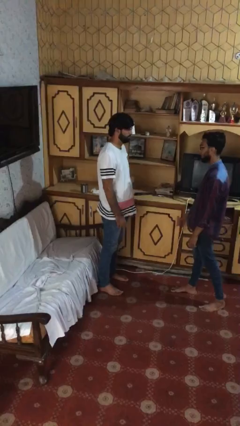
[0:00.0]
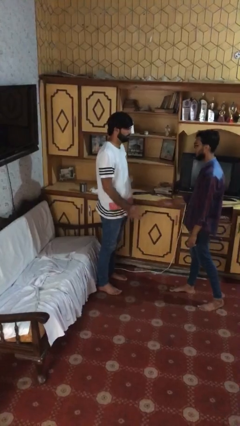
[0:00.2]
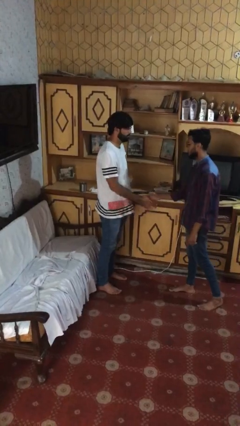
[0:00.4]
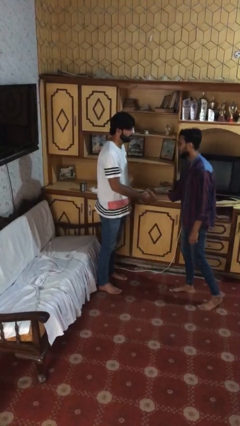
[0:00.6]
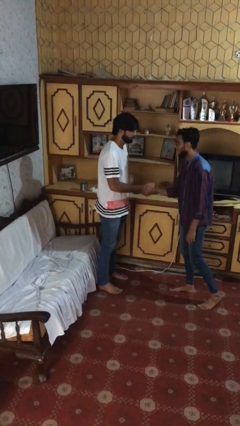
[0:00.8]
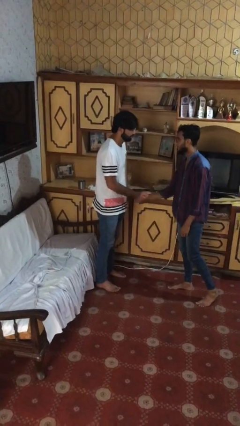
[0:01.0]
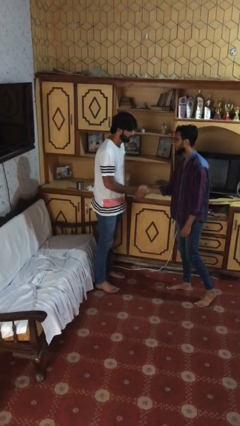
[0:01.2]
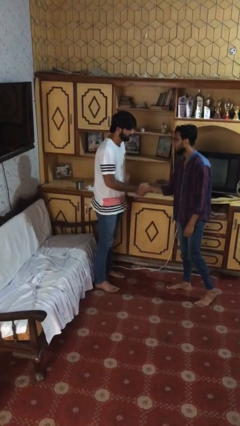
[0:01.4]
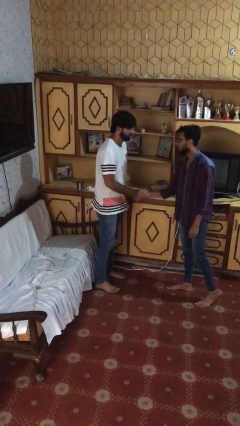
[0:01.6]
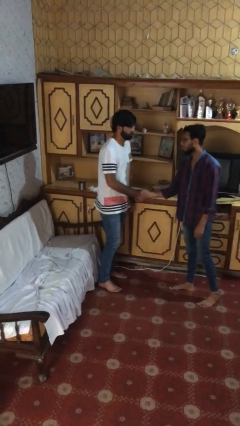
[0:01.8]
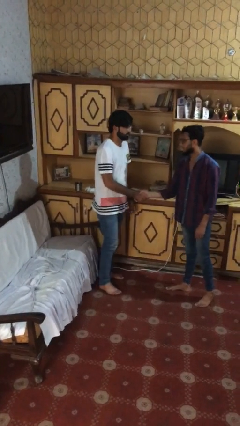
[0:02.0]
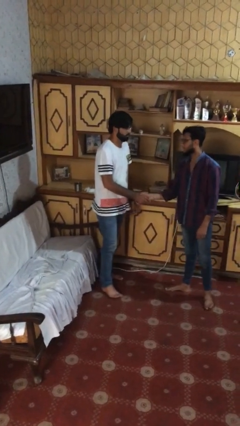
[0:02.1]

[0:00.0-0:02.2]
person shakes hand

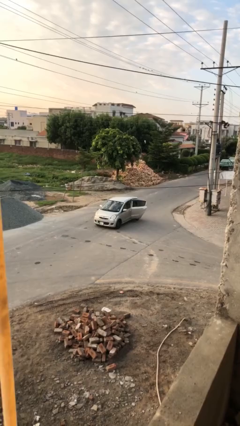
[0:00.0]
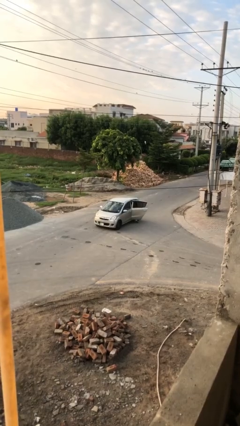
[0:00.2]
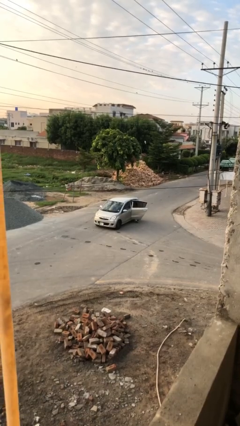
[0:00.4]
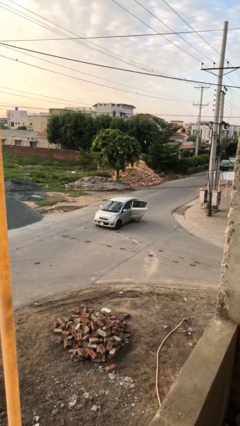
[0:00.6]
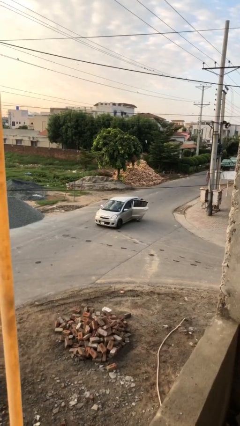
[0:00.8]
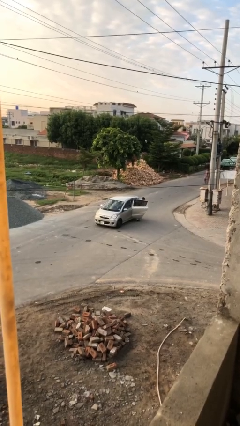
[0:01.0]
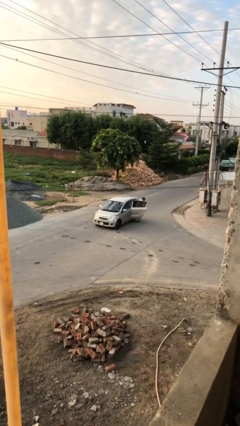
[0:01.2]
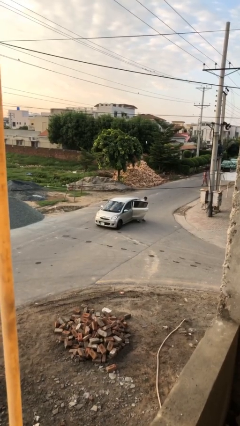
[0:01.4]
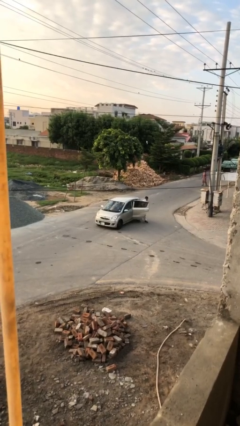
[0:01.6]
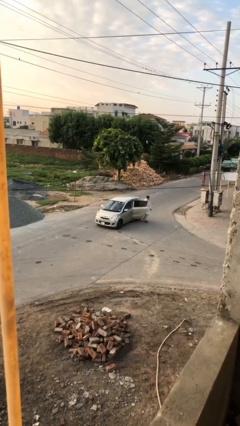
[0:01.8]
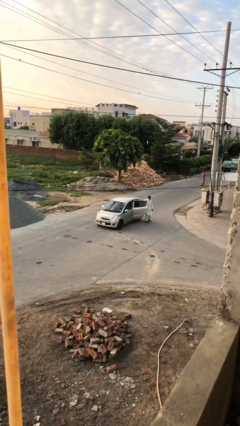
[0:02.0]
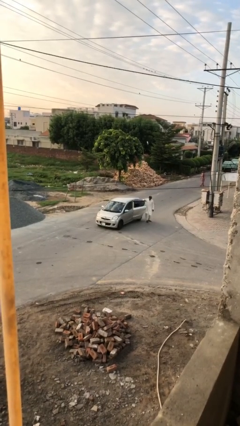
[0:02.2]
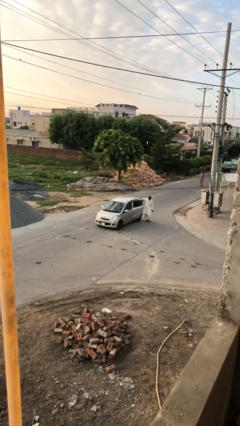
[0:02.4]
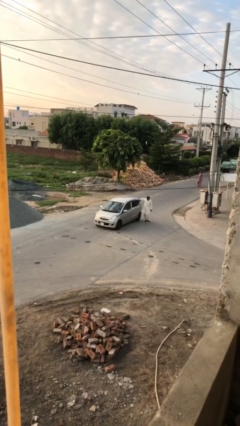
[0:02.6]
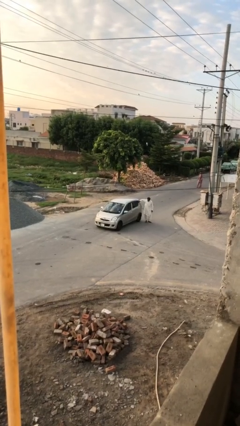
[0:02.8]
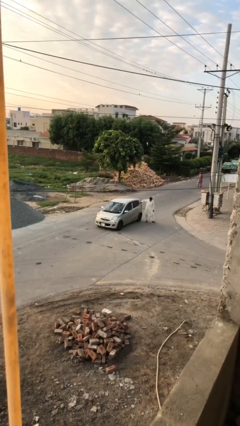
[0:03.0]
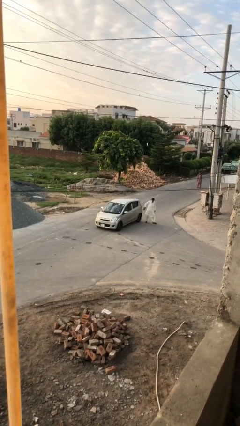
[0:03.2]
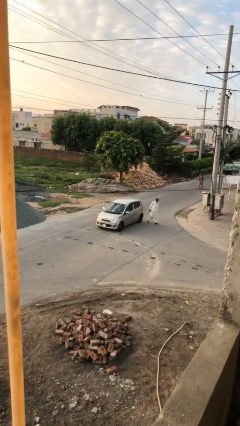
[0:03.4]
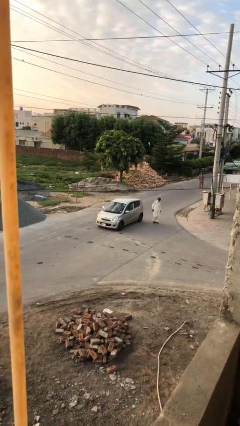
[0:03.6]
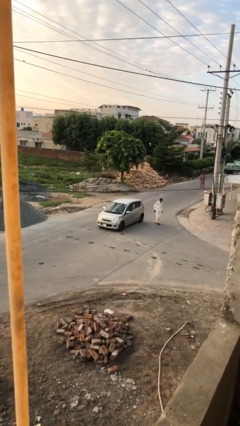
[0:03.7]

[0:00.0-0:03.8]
car drops off person

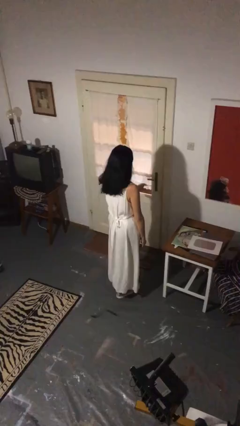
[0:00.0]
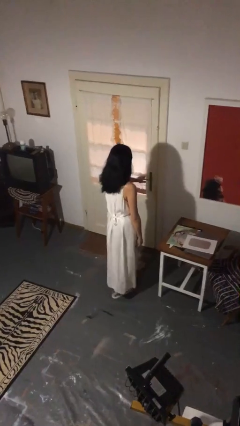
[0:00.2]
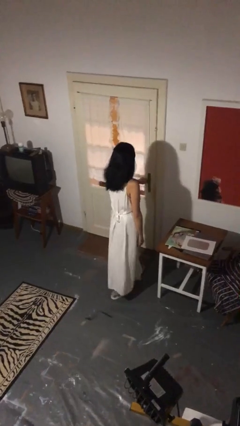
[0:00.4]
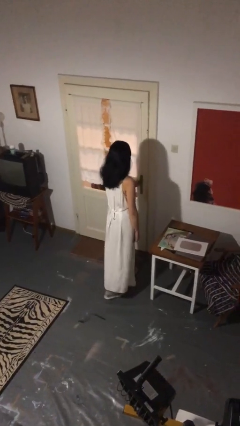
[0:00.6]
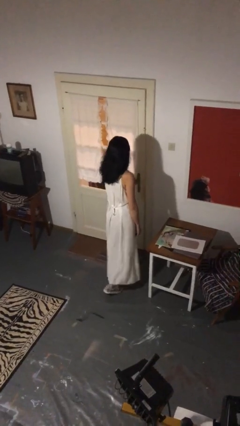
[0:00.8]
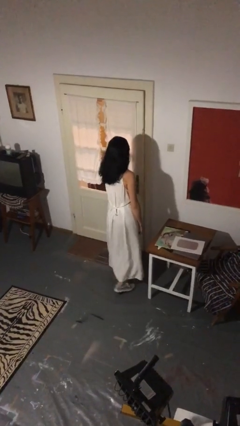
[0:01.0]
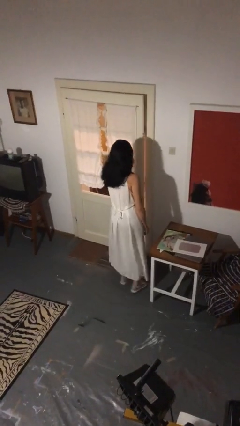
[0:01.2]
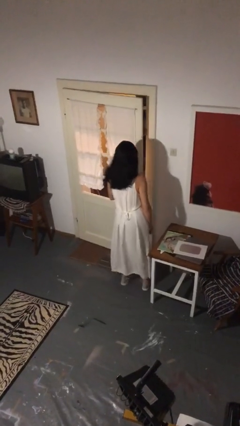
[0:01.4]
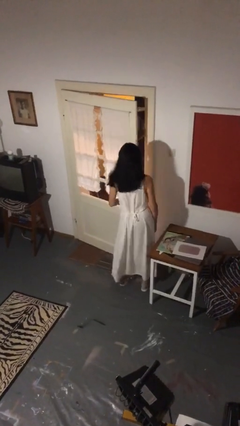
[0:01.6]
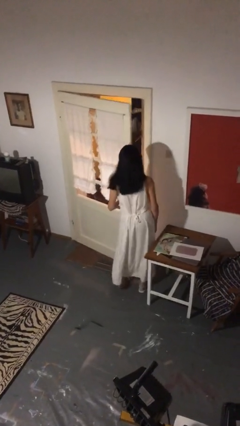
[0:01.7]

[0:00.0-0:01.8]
person opens facility door

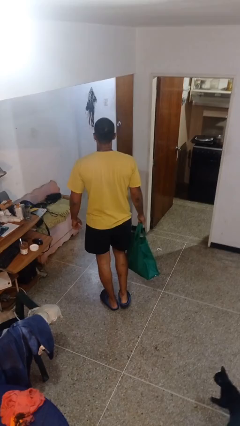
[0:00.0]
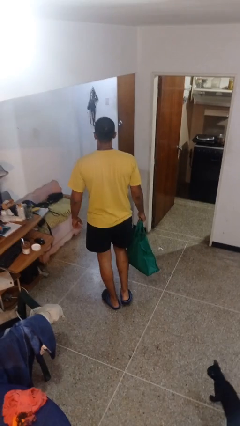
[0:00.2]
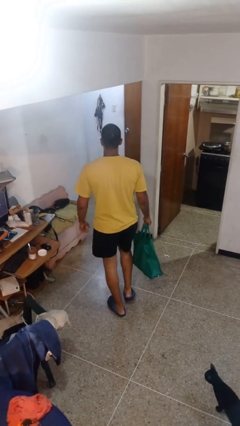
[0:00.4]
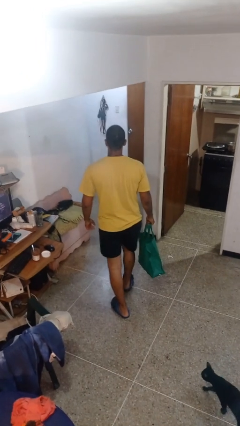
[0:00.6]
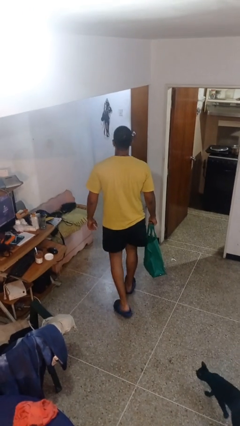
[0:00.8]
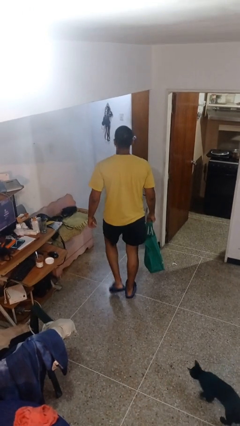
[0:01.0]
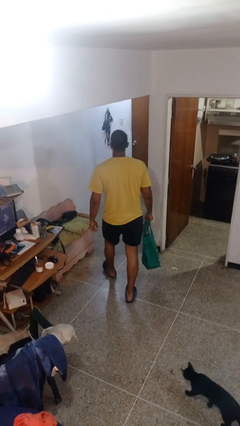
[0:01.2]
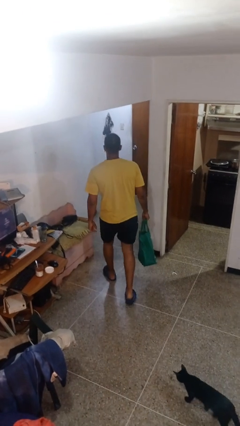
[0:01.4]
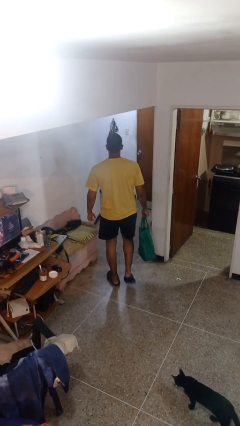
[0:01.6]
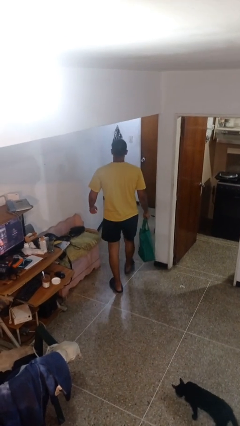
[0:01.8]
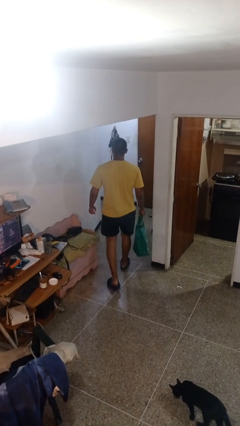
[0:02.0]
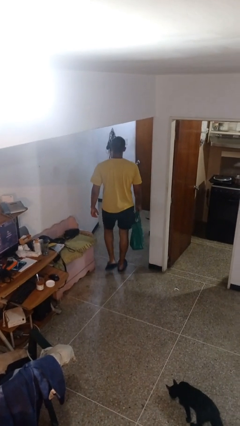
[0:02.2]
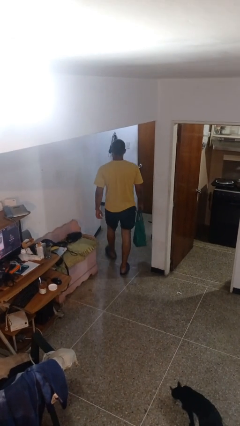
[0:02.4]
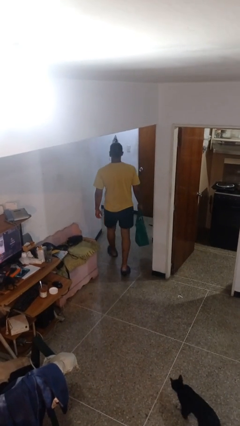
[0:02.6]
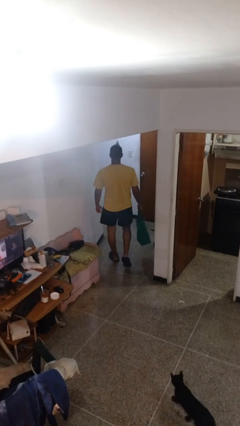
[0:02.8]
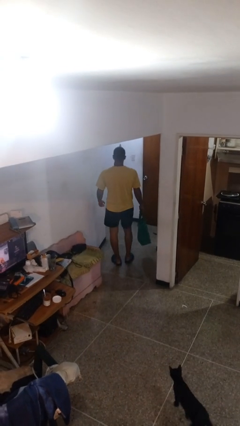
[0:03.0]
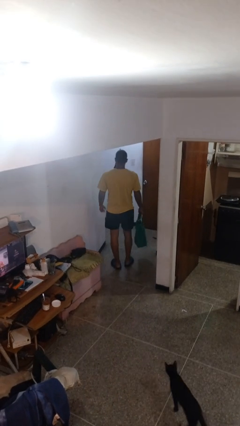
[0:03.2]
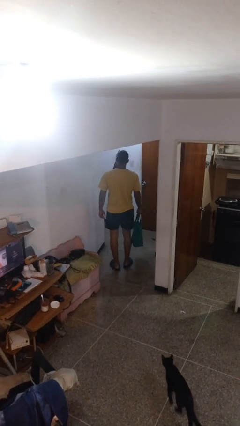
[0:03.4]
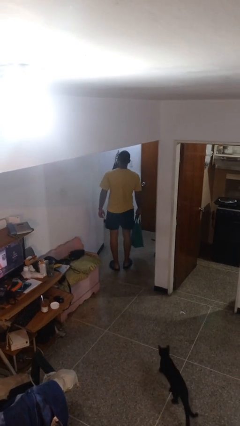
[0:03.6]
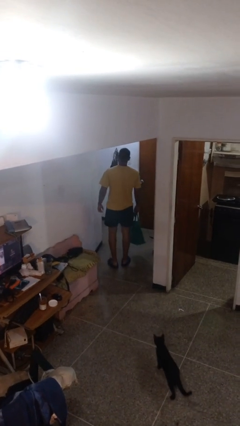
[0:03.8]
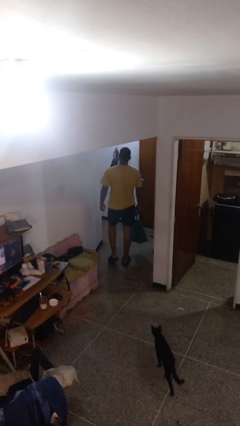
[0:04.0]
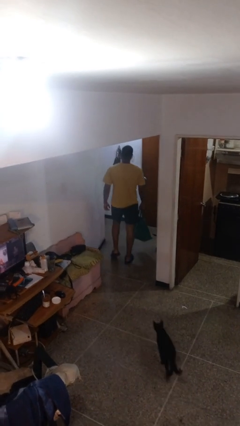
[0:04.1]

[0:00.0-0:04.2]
person carries groceries

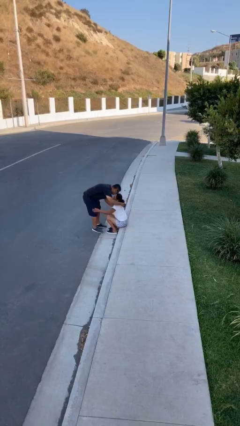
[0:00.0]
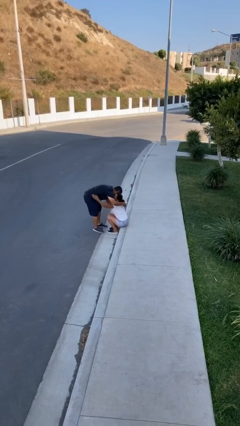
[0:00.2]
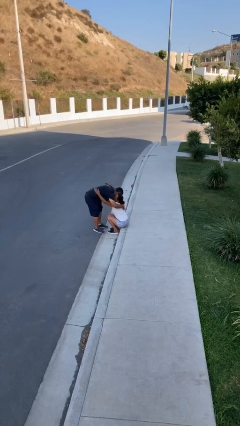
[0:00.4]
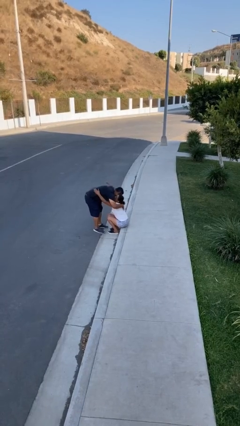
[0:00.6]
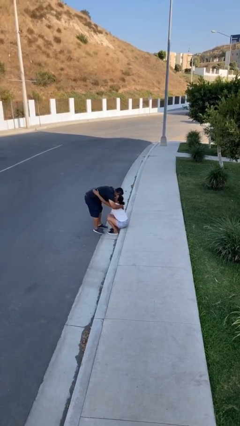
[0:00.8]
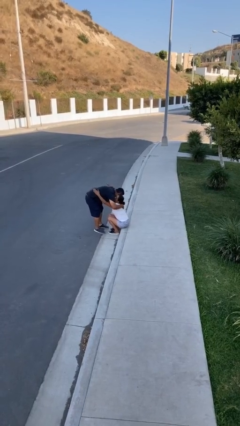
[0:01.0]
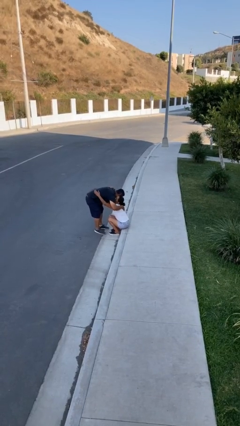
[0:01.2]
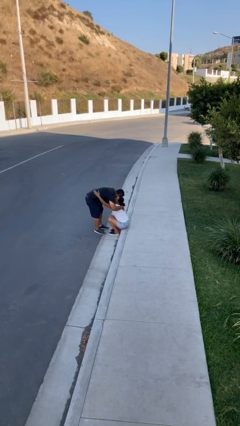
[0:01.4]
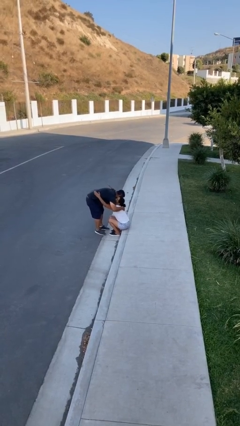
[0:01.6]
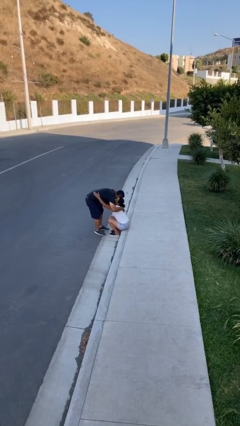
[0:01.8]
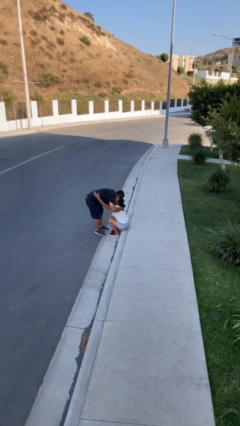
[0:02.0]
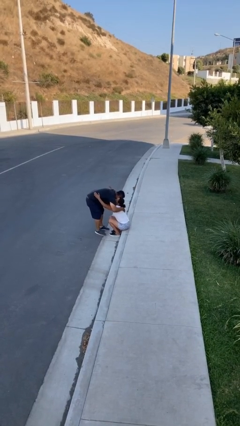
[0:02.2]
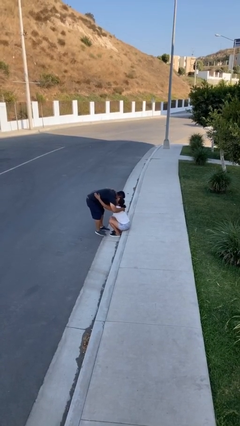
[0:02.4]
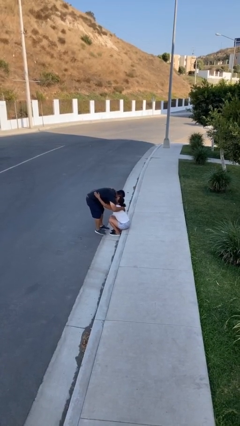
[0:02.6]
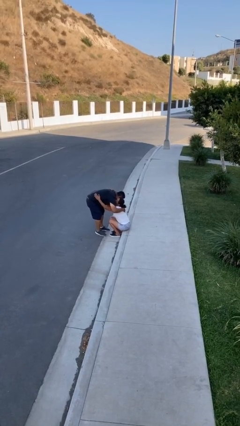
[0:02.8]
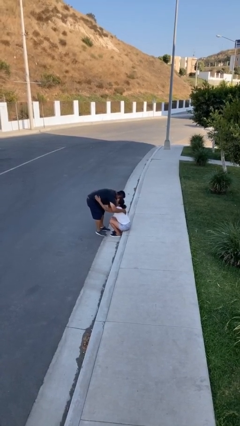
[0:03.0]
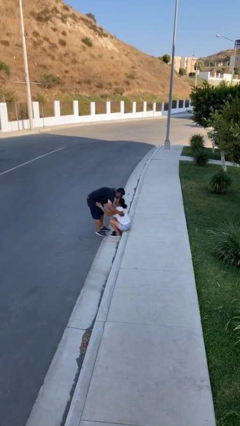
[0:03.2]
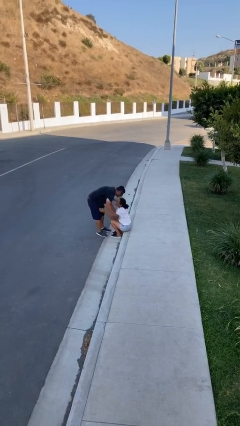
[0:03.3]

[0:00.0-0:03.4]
person embraces person

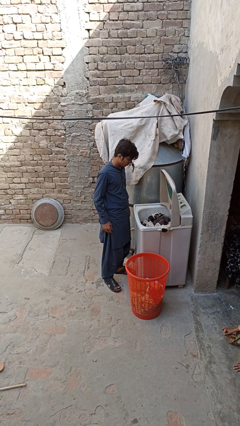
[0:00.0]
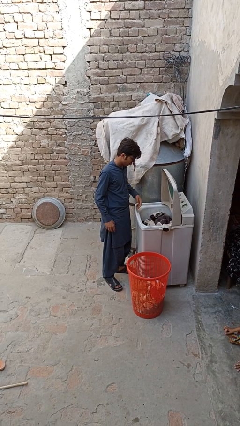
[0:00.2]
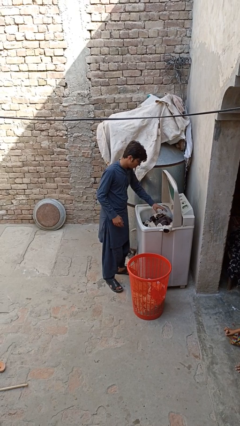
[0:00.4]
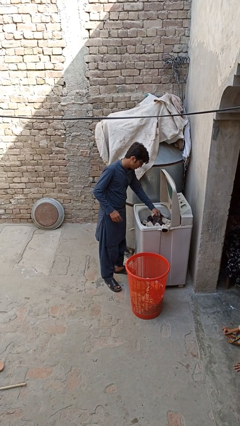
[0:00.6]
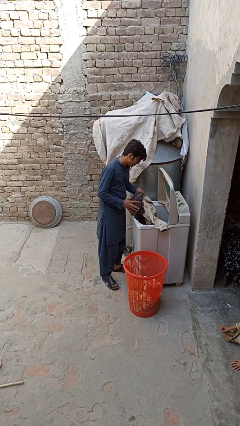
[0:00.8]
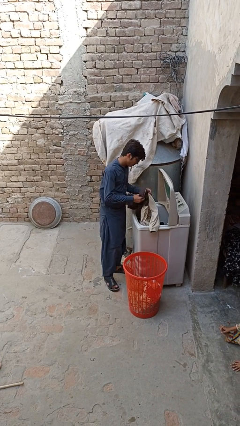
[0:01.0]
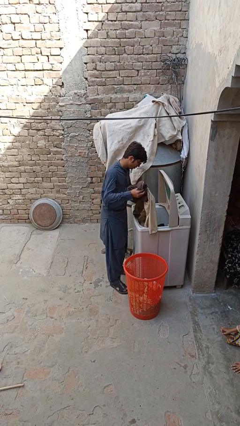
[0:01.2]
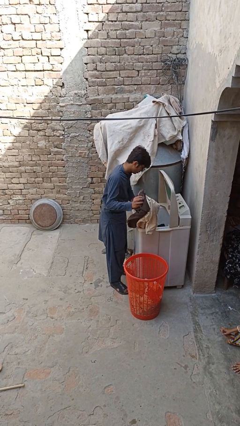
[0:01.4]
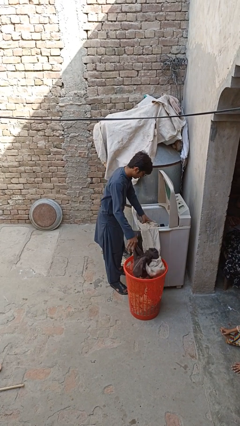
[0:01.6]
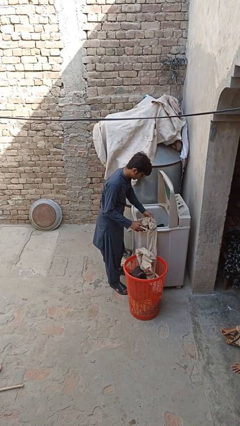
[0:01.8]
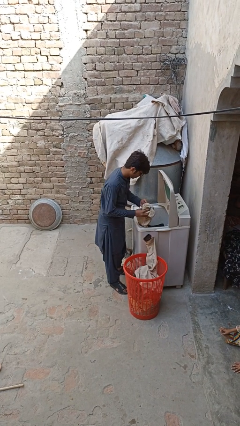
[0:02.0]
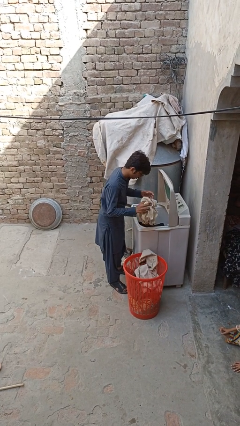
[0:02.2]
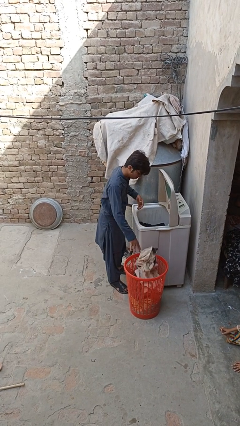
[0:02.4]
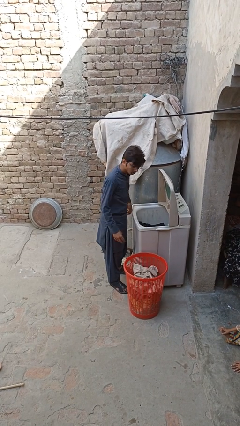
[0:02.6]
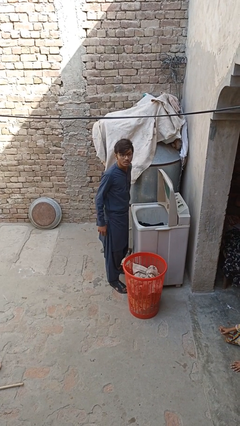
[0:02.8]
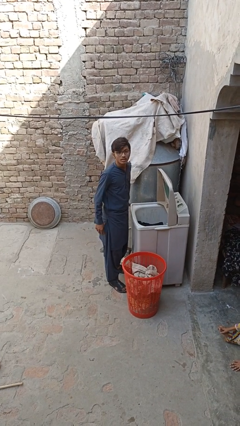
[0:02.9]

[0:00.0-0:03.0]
person unloads clotheswasher
